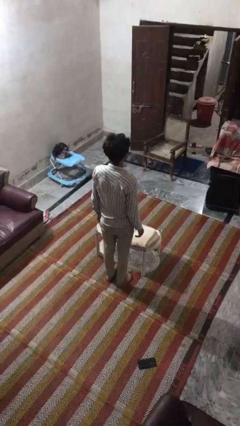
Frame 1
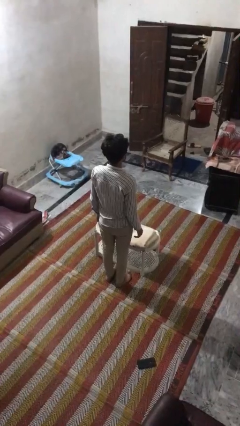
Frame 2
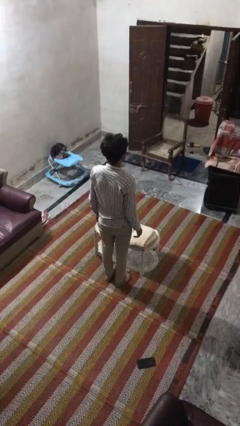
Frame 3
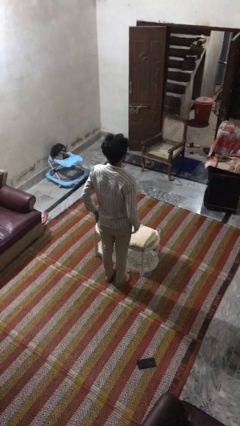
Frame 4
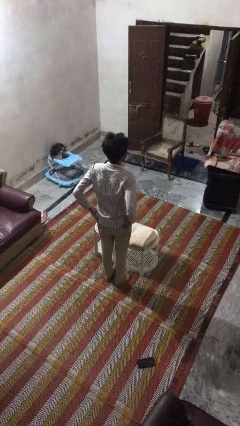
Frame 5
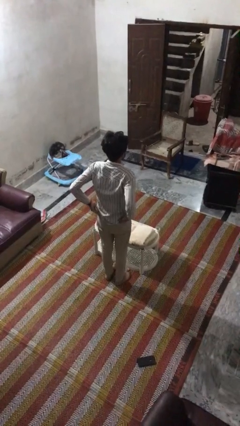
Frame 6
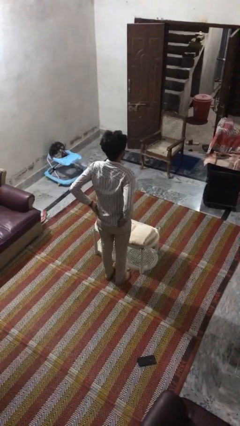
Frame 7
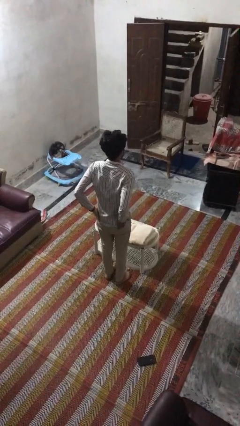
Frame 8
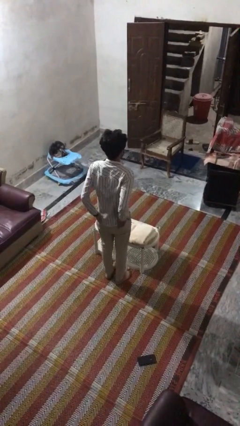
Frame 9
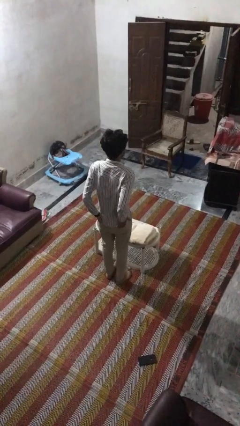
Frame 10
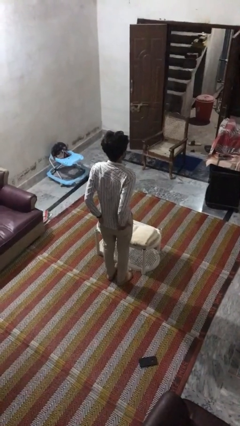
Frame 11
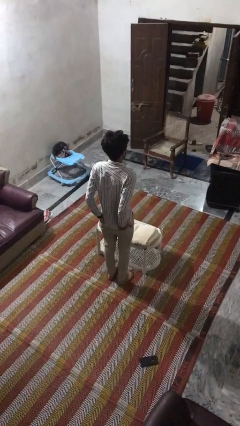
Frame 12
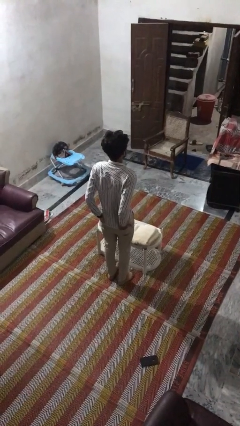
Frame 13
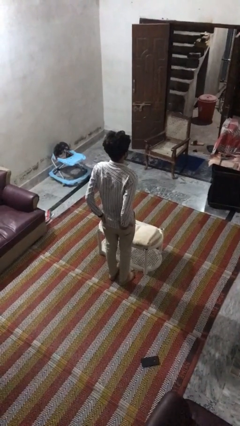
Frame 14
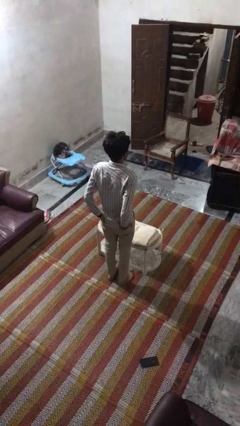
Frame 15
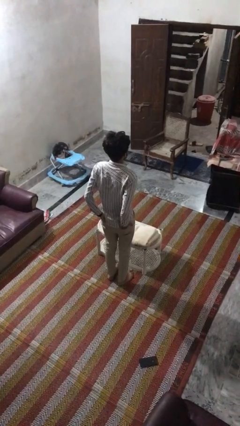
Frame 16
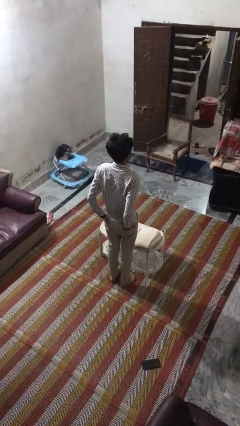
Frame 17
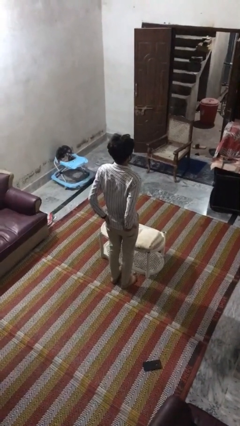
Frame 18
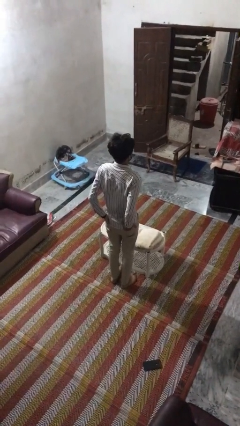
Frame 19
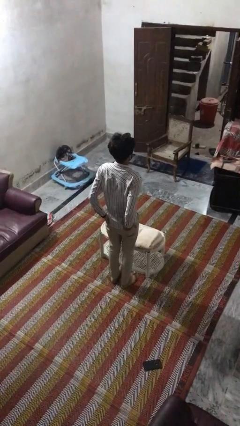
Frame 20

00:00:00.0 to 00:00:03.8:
person puts hands in back pockets

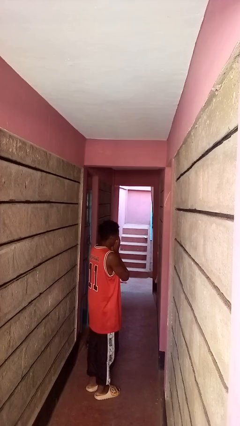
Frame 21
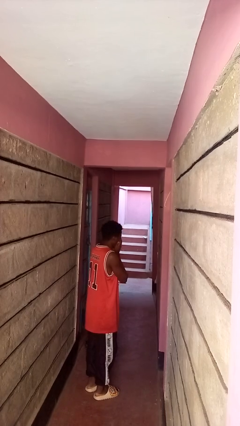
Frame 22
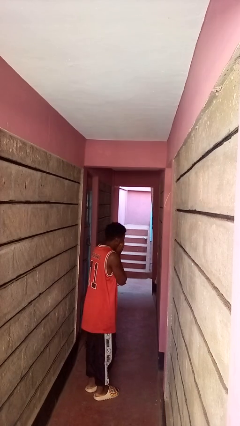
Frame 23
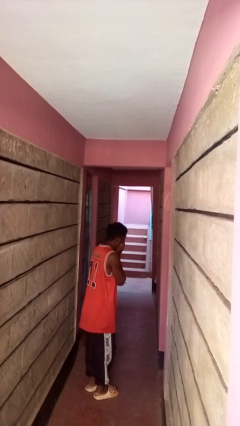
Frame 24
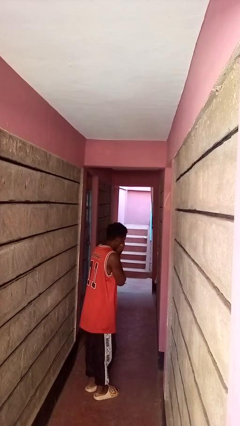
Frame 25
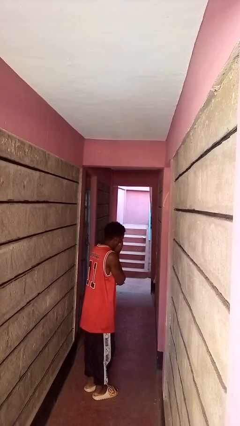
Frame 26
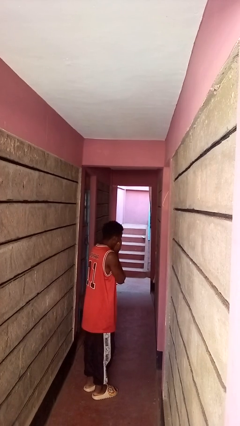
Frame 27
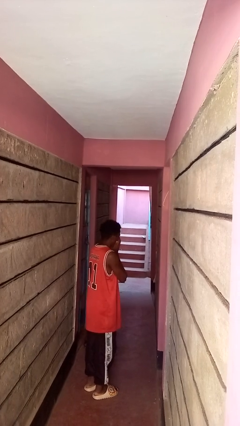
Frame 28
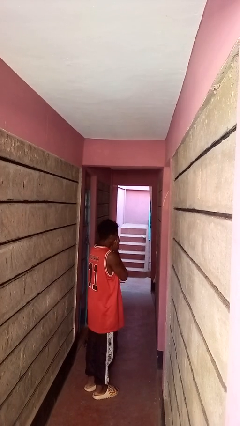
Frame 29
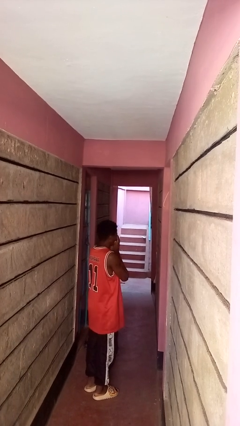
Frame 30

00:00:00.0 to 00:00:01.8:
person sneezes into hand

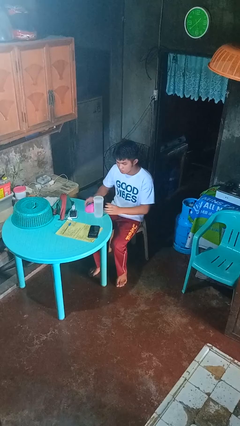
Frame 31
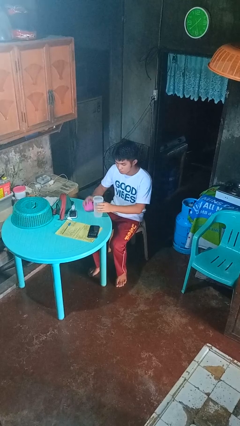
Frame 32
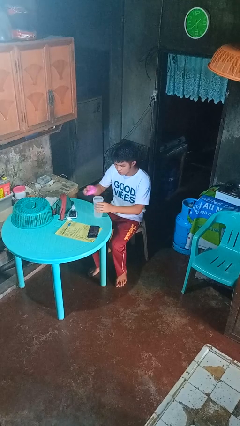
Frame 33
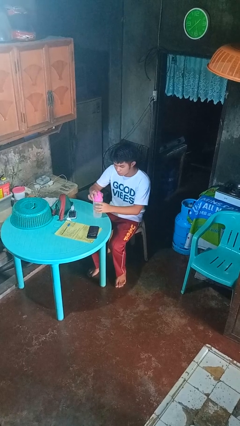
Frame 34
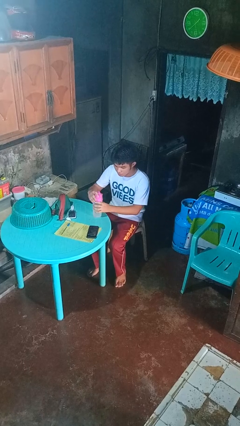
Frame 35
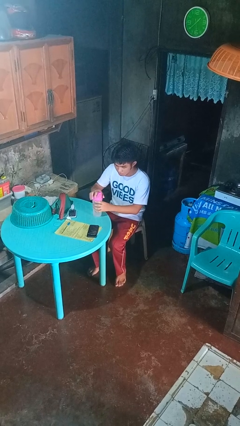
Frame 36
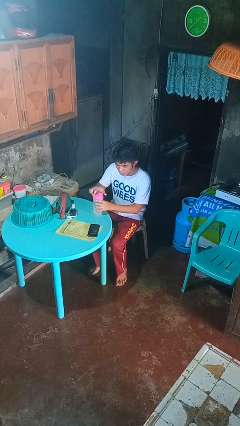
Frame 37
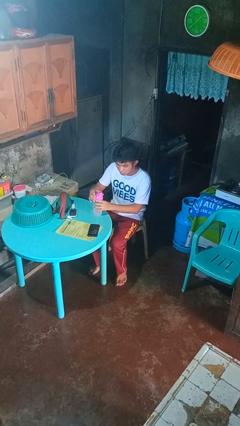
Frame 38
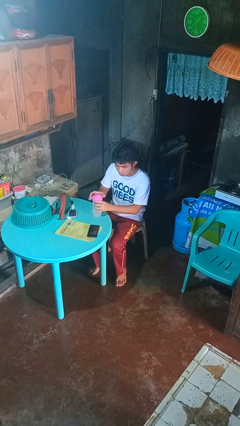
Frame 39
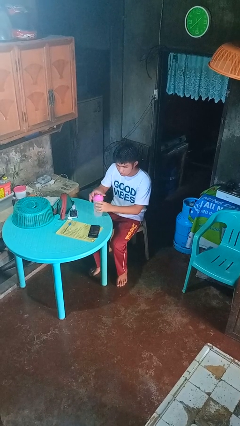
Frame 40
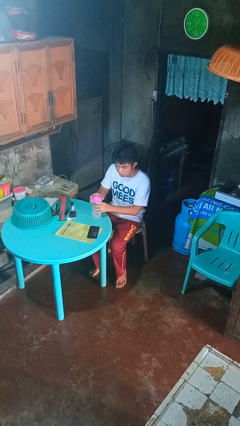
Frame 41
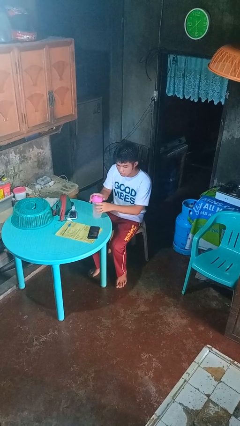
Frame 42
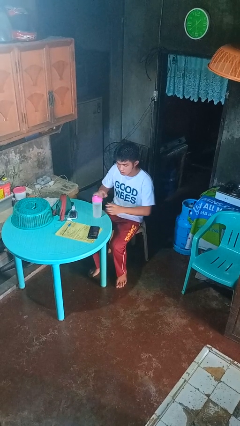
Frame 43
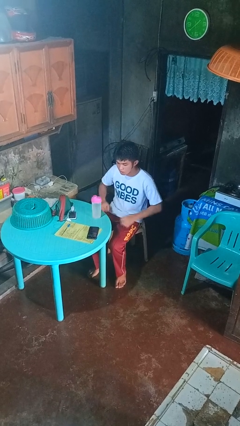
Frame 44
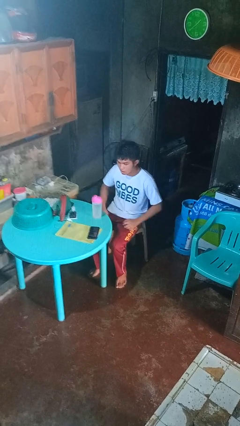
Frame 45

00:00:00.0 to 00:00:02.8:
person screws lid to bottle

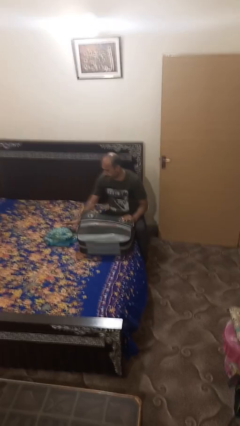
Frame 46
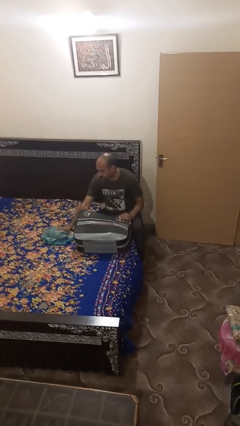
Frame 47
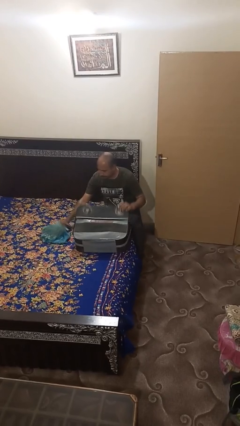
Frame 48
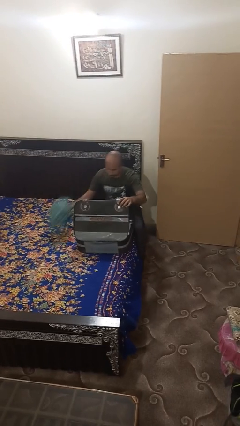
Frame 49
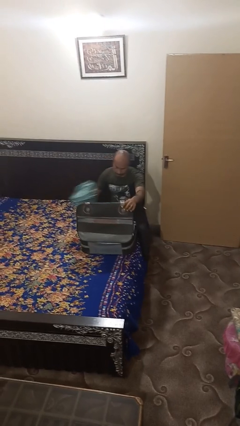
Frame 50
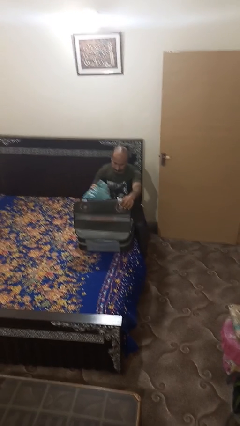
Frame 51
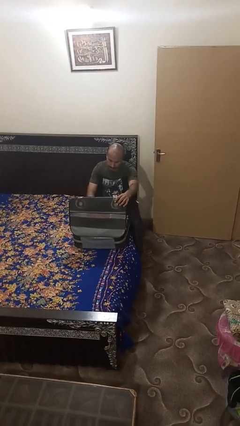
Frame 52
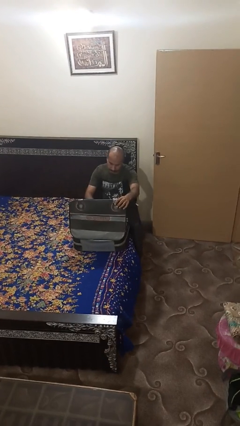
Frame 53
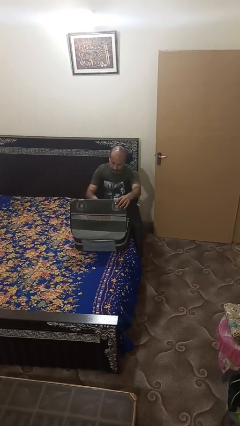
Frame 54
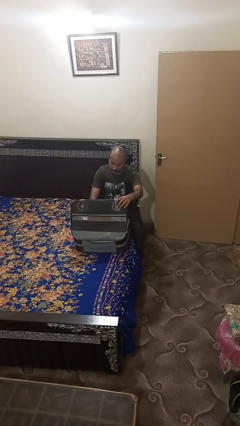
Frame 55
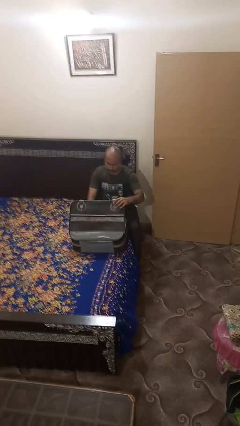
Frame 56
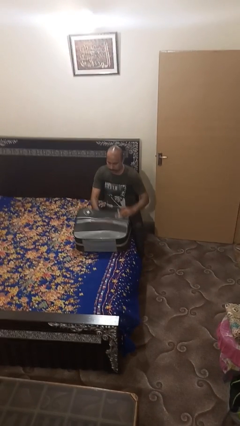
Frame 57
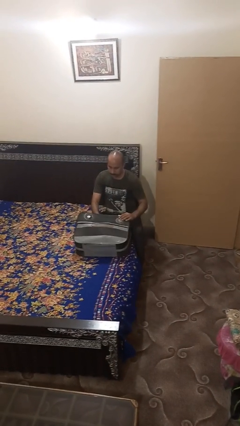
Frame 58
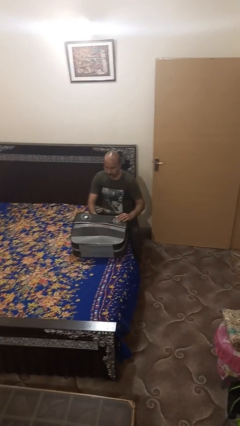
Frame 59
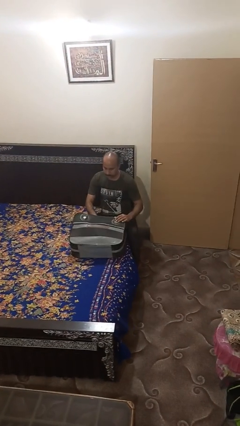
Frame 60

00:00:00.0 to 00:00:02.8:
person loads clothes into suitcase

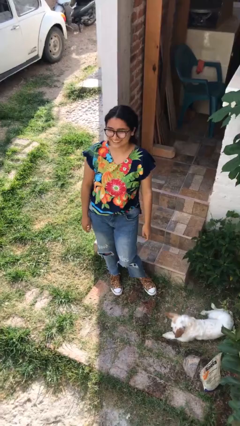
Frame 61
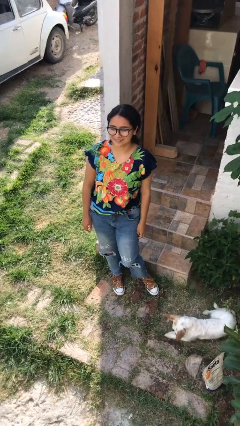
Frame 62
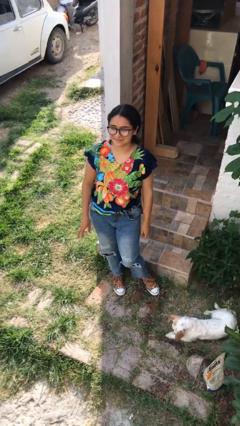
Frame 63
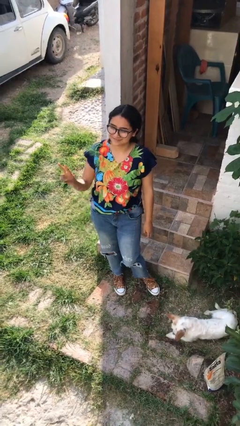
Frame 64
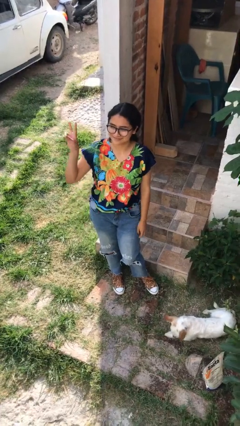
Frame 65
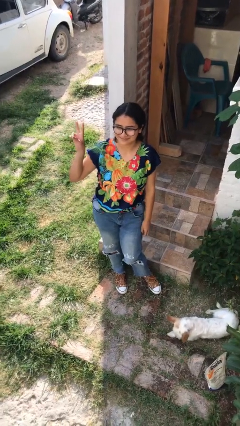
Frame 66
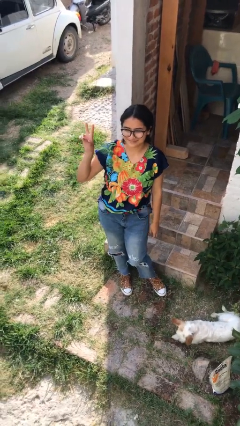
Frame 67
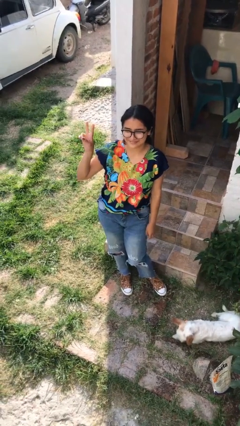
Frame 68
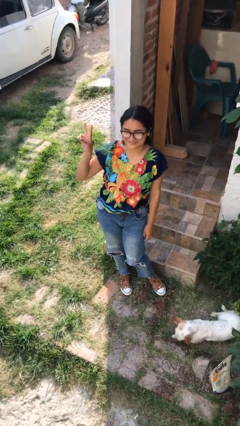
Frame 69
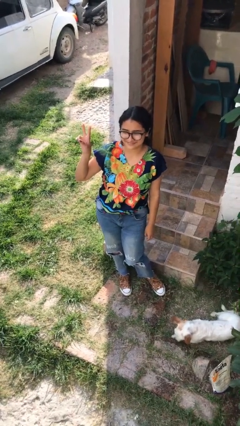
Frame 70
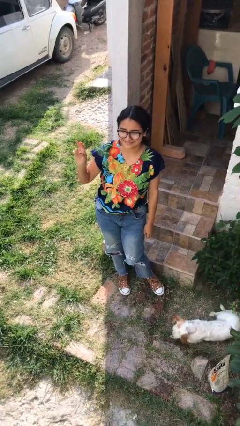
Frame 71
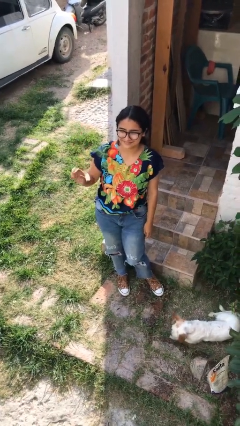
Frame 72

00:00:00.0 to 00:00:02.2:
person gestures peace

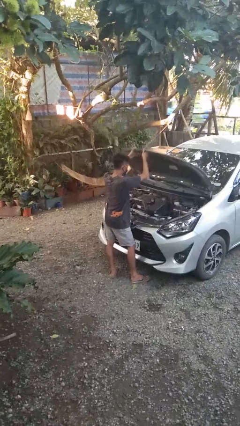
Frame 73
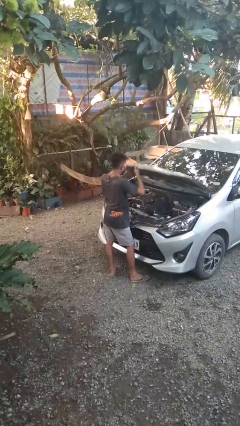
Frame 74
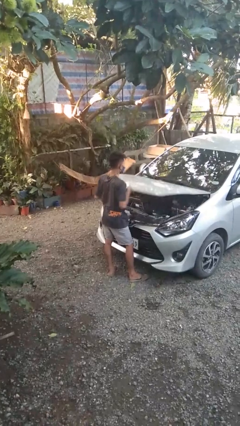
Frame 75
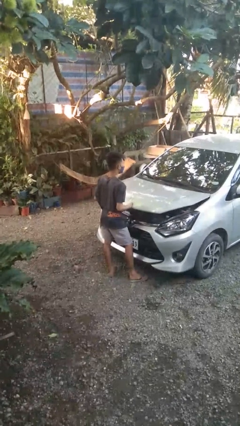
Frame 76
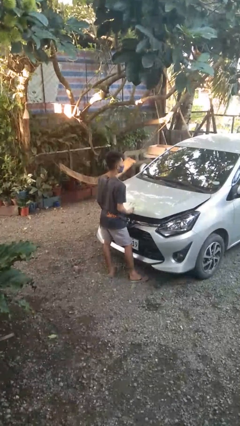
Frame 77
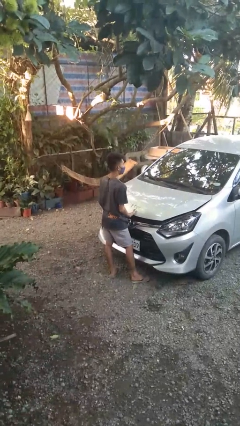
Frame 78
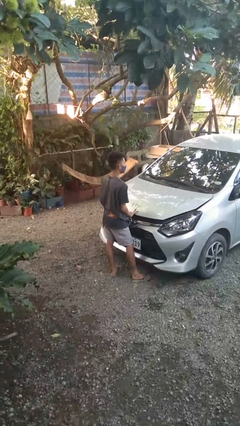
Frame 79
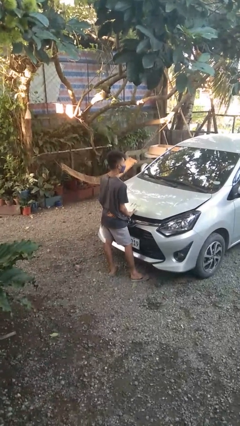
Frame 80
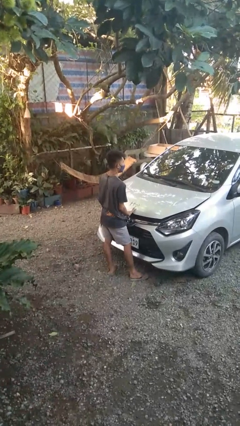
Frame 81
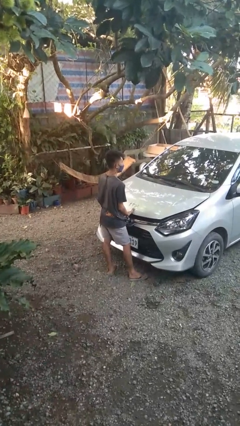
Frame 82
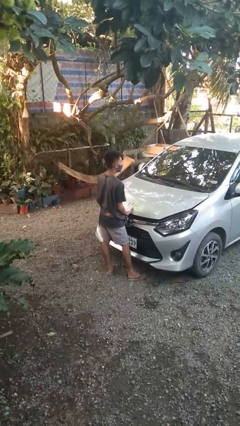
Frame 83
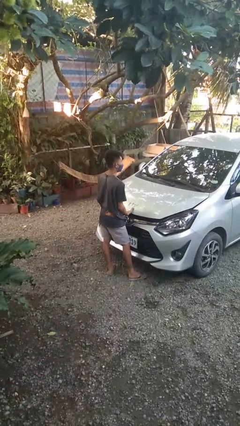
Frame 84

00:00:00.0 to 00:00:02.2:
person closes car hood

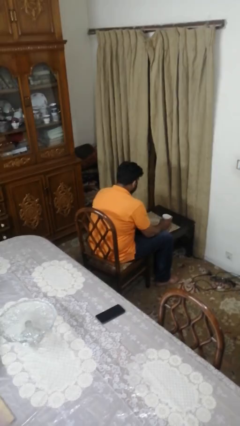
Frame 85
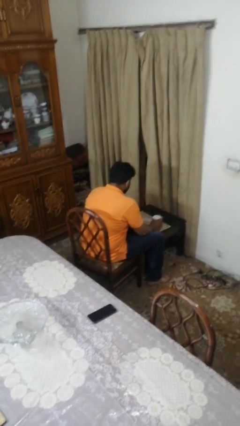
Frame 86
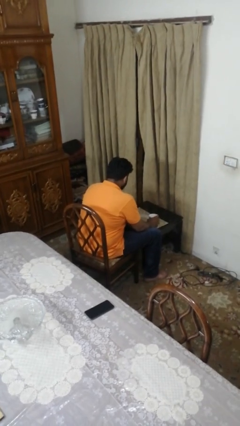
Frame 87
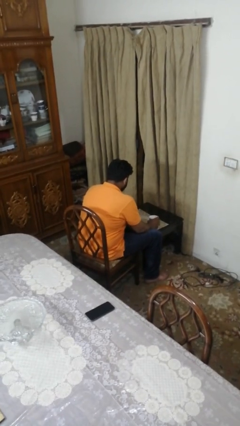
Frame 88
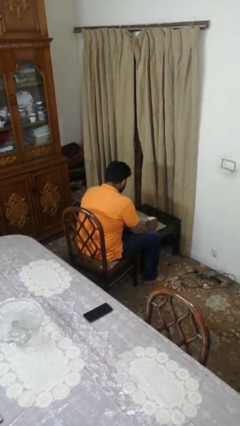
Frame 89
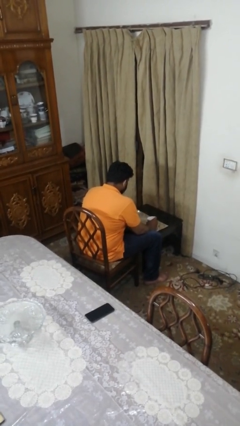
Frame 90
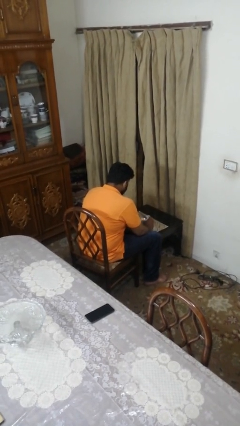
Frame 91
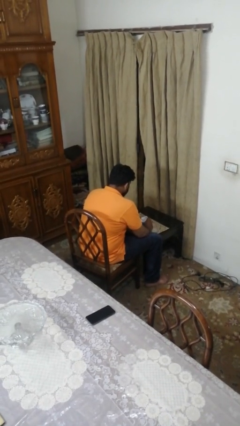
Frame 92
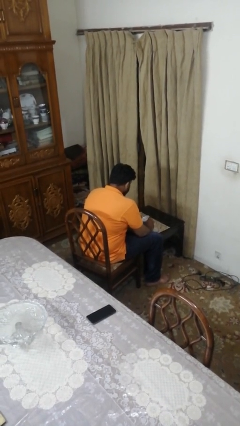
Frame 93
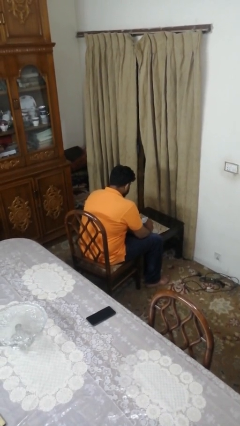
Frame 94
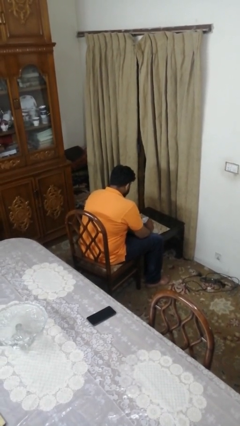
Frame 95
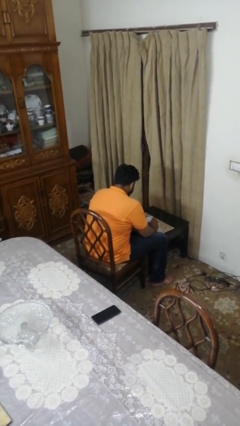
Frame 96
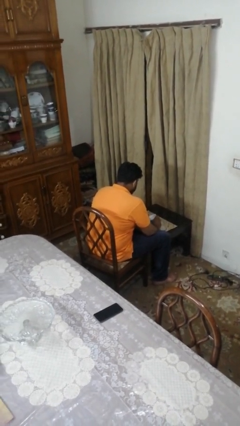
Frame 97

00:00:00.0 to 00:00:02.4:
person stirs mug
